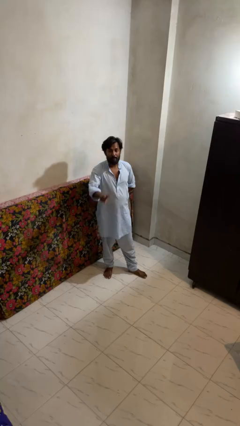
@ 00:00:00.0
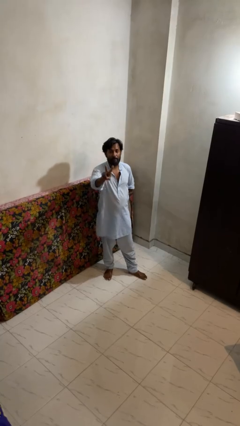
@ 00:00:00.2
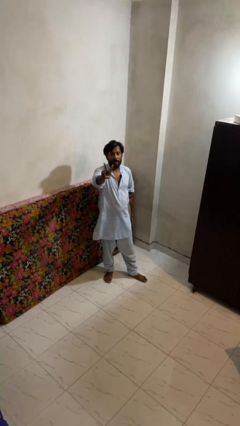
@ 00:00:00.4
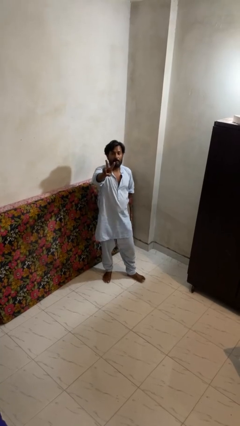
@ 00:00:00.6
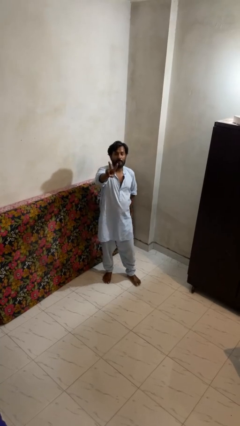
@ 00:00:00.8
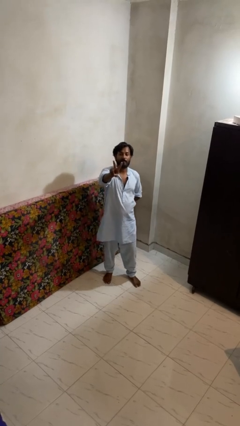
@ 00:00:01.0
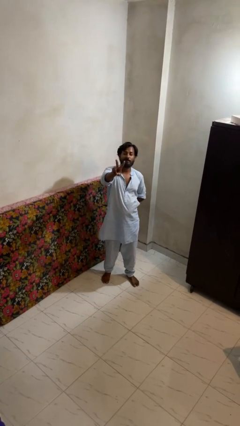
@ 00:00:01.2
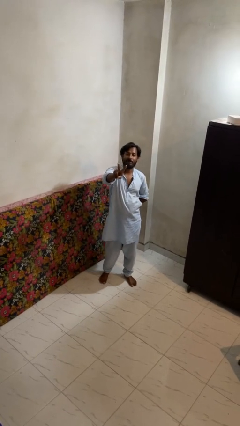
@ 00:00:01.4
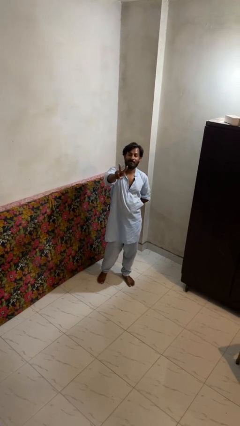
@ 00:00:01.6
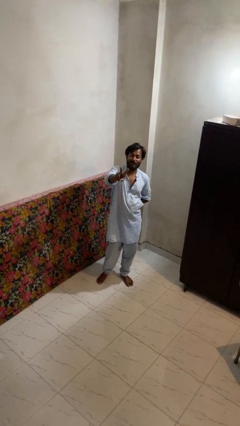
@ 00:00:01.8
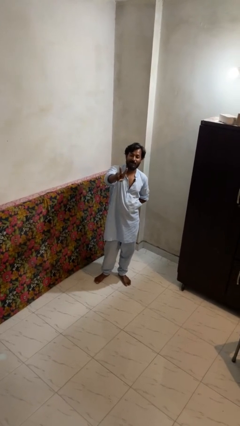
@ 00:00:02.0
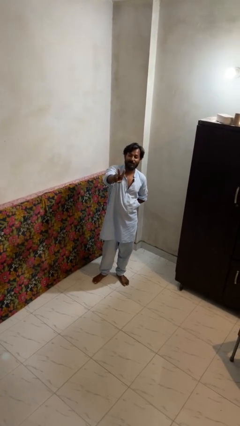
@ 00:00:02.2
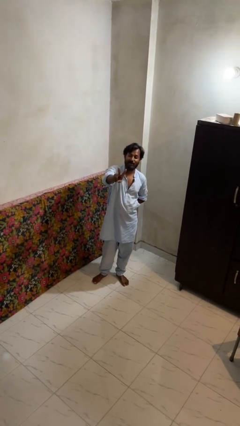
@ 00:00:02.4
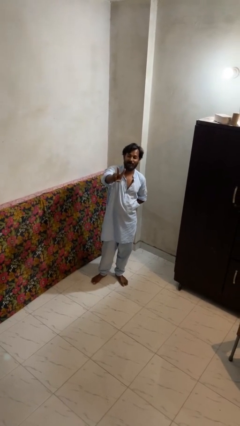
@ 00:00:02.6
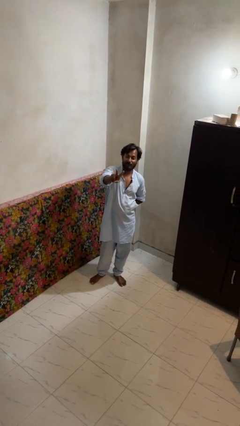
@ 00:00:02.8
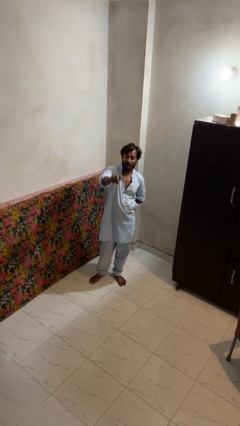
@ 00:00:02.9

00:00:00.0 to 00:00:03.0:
person gestures peace

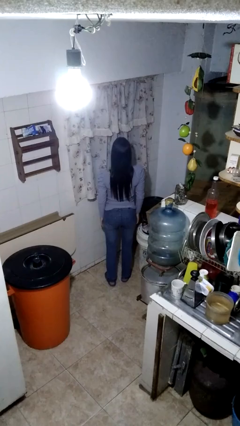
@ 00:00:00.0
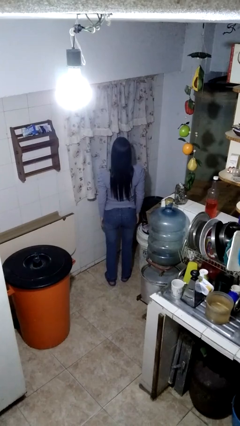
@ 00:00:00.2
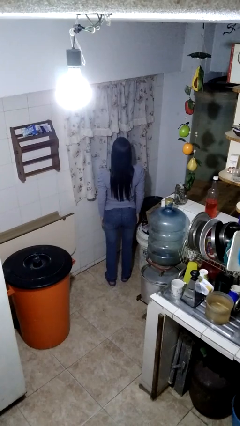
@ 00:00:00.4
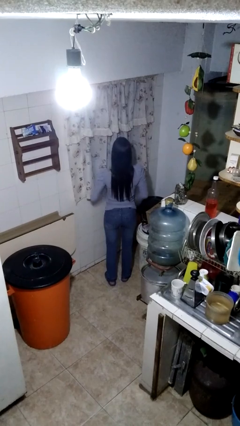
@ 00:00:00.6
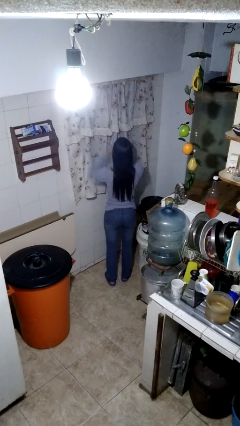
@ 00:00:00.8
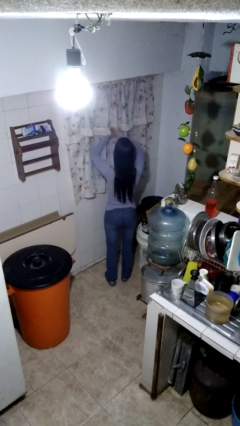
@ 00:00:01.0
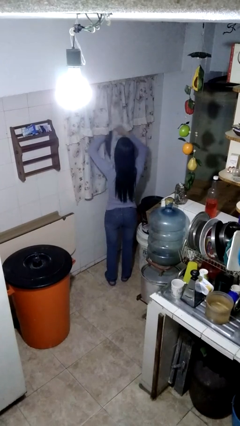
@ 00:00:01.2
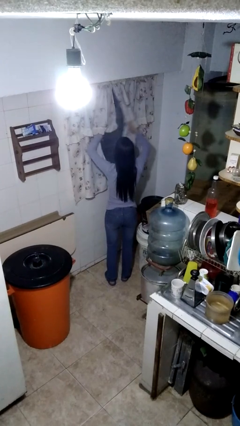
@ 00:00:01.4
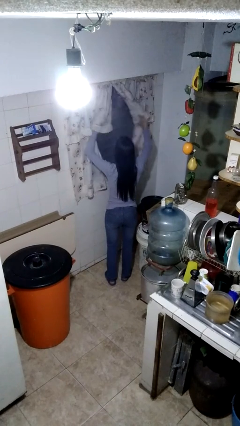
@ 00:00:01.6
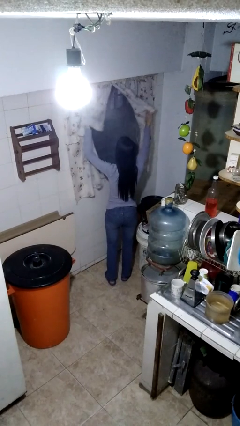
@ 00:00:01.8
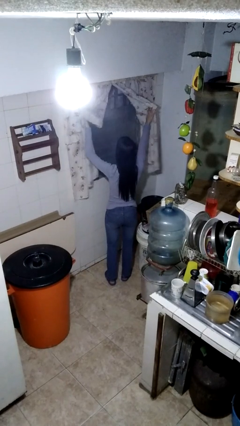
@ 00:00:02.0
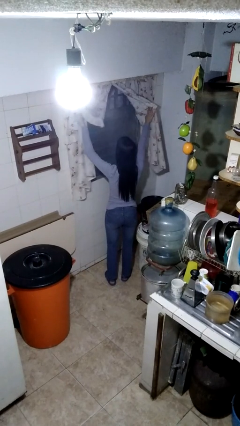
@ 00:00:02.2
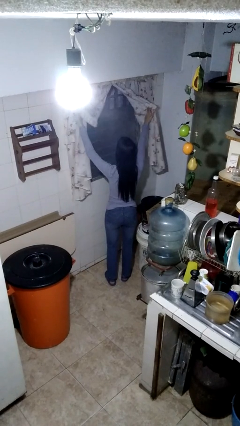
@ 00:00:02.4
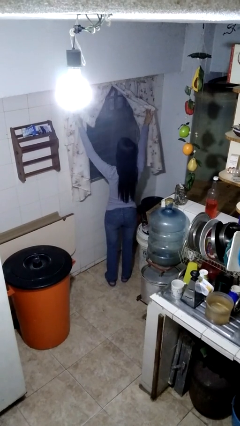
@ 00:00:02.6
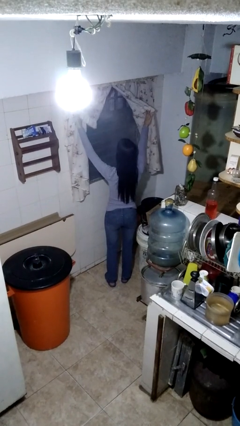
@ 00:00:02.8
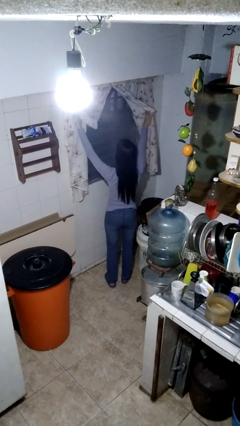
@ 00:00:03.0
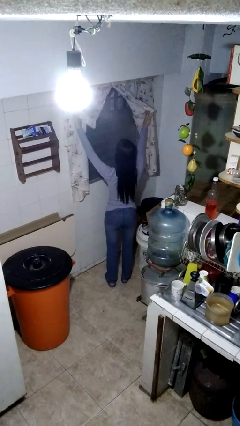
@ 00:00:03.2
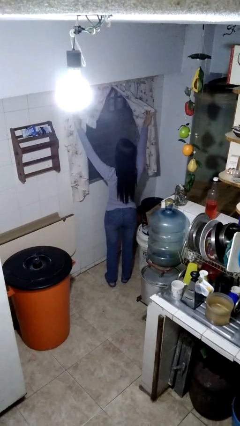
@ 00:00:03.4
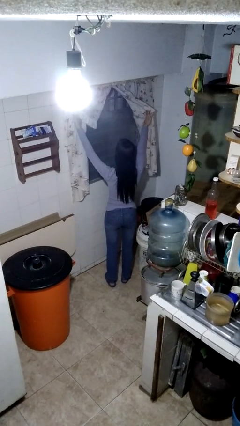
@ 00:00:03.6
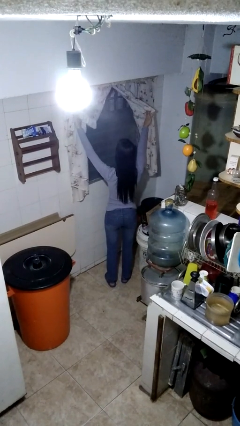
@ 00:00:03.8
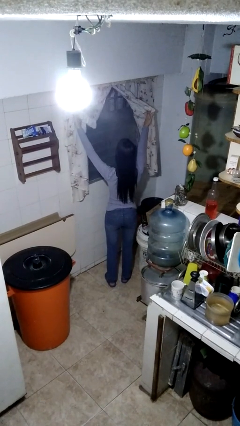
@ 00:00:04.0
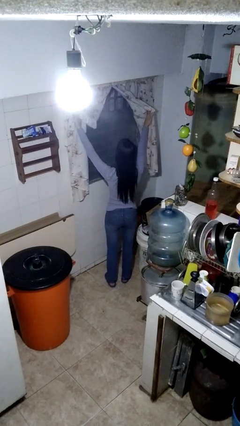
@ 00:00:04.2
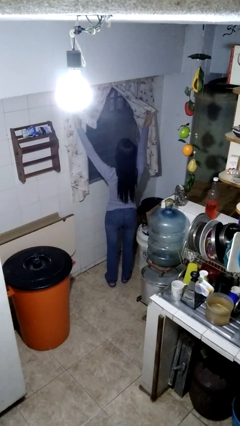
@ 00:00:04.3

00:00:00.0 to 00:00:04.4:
person opens curtains

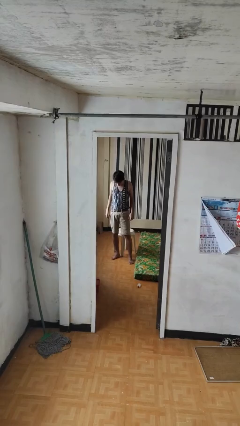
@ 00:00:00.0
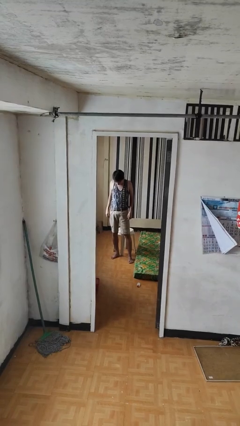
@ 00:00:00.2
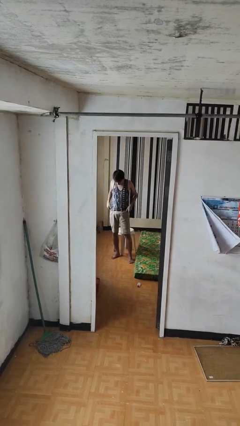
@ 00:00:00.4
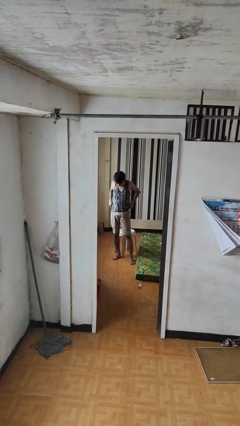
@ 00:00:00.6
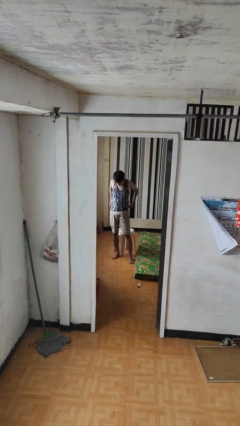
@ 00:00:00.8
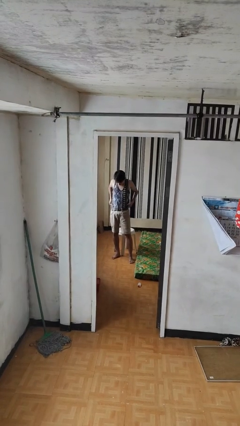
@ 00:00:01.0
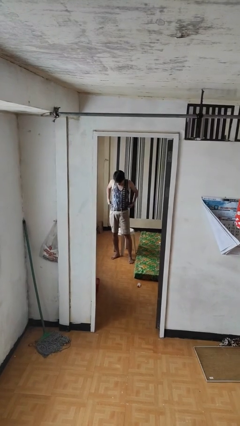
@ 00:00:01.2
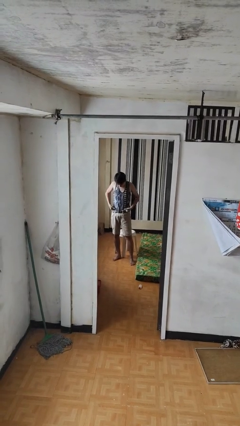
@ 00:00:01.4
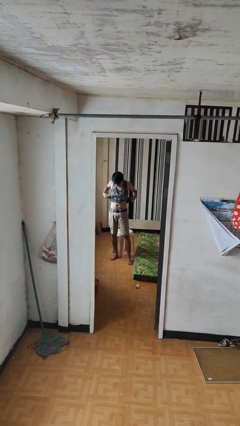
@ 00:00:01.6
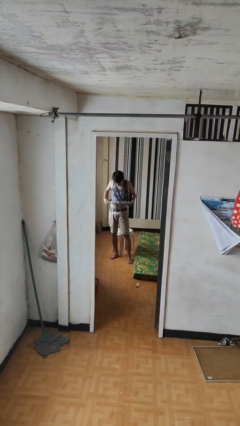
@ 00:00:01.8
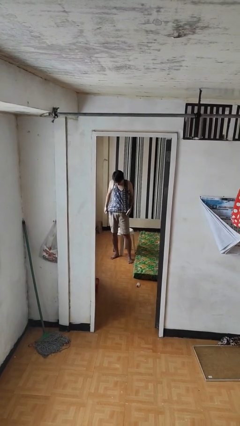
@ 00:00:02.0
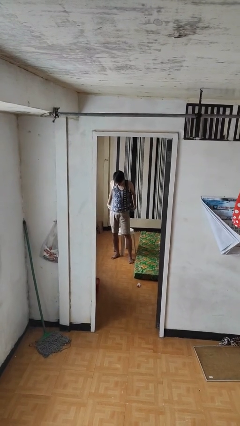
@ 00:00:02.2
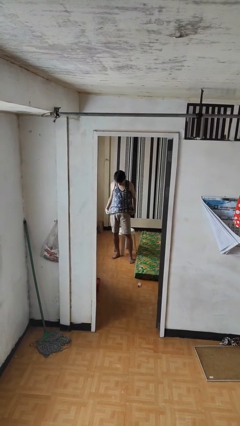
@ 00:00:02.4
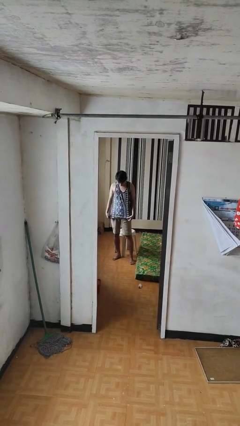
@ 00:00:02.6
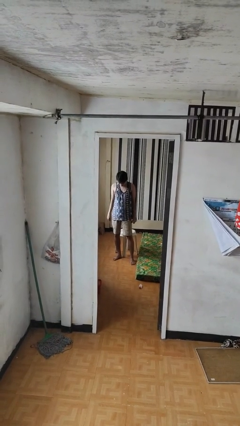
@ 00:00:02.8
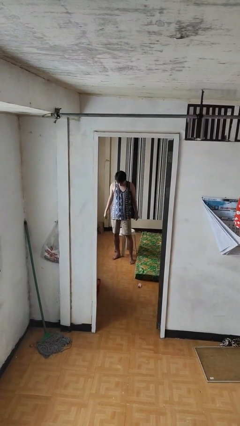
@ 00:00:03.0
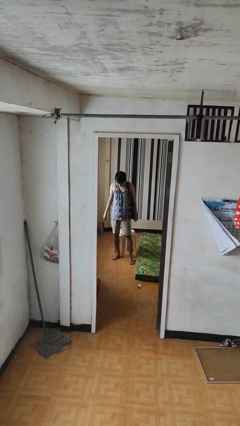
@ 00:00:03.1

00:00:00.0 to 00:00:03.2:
person untucks shirt

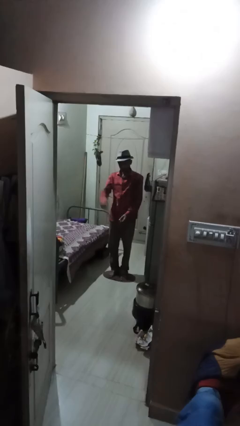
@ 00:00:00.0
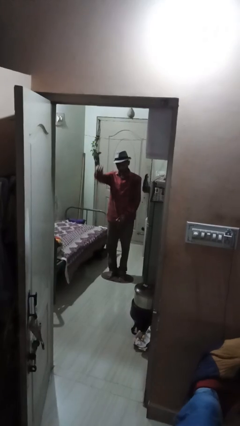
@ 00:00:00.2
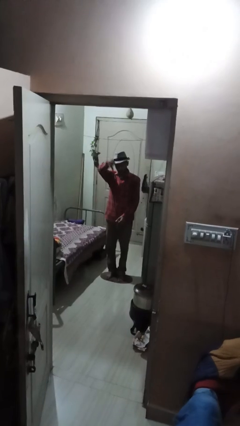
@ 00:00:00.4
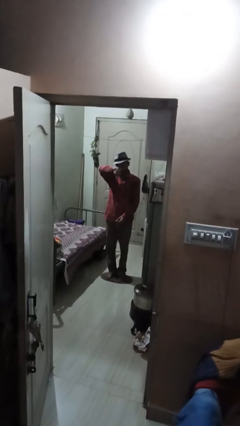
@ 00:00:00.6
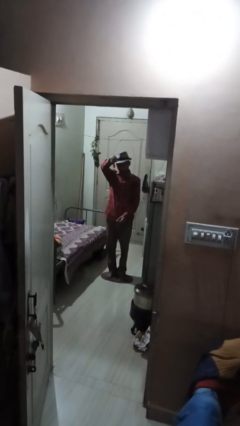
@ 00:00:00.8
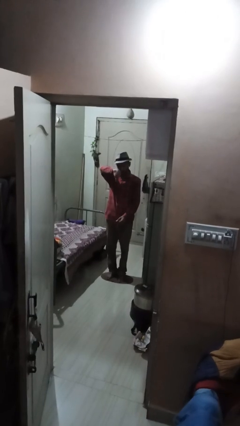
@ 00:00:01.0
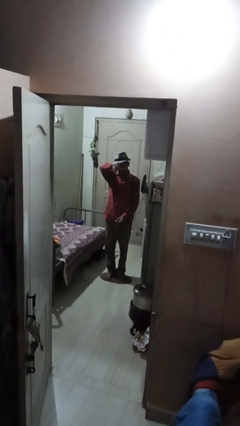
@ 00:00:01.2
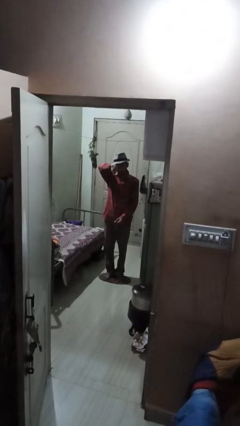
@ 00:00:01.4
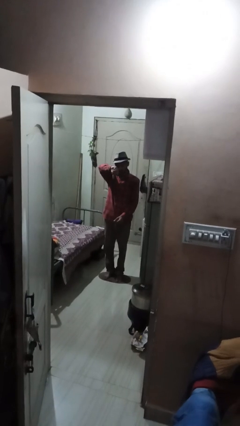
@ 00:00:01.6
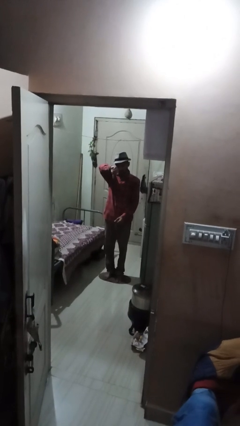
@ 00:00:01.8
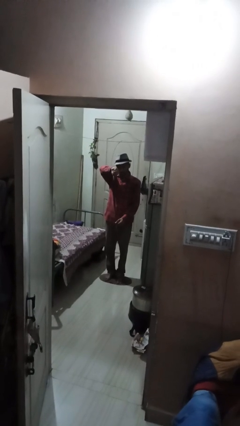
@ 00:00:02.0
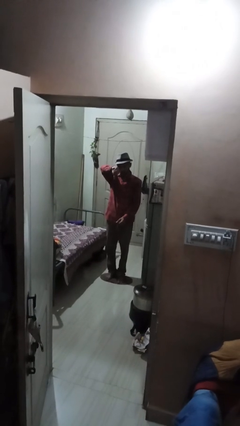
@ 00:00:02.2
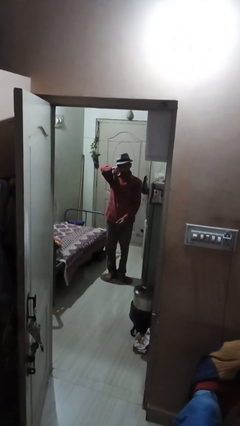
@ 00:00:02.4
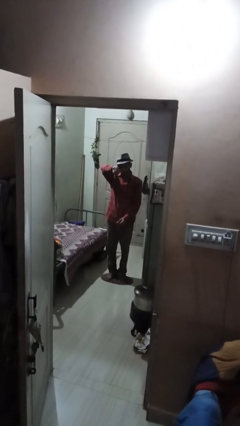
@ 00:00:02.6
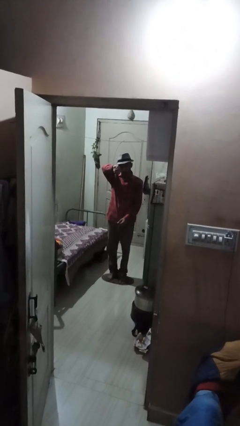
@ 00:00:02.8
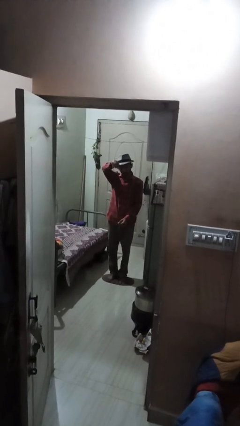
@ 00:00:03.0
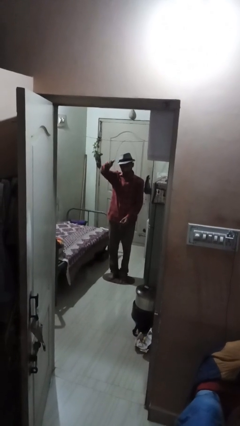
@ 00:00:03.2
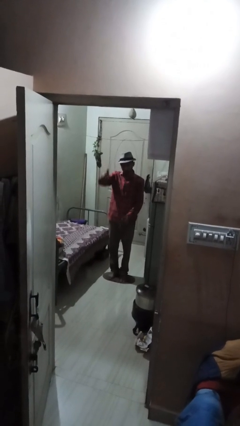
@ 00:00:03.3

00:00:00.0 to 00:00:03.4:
person gestures thumbs down

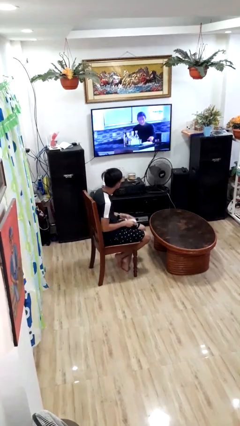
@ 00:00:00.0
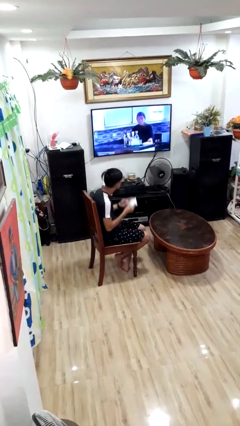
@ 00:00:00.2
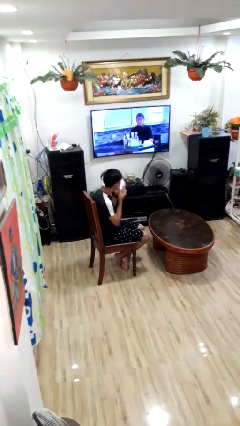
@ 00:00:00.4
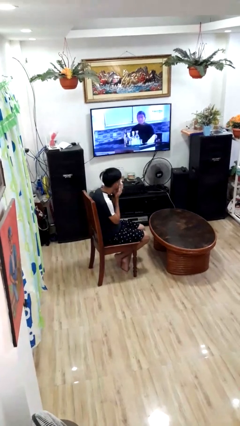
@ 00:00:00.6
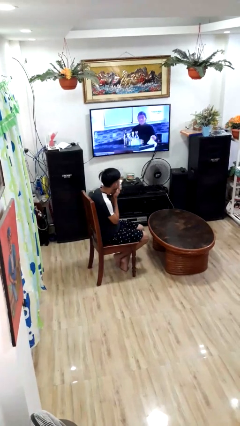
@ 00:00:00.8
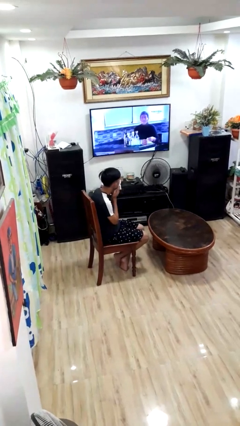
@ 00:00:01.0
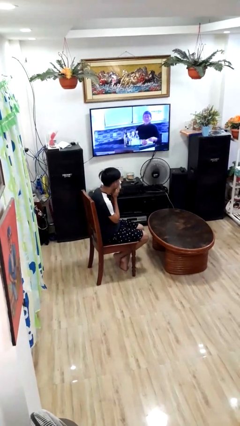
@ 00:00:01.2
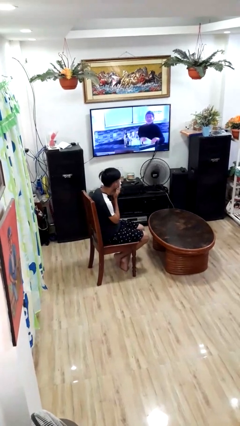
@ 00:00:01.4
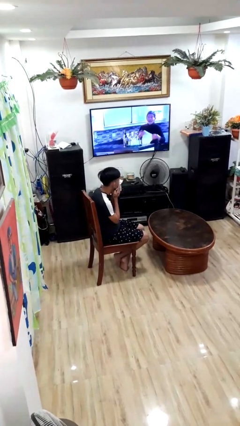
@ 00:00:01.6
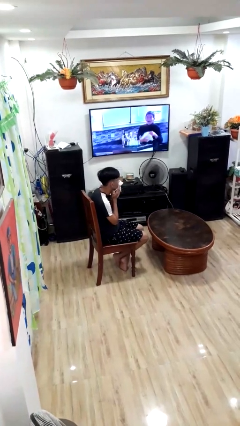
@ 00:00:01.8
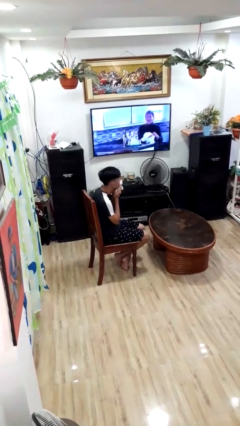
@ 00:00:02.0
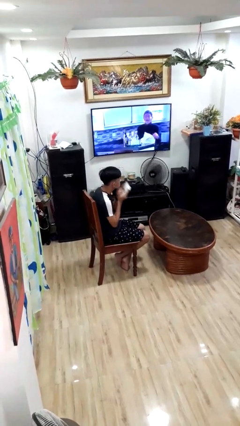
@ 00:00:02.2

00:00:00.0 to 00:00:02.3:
person wipes mouth with napkin

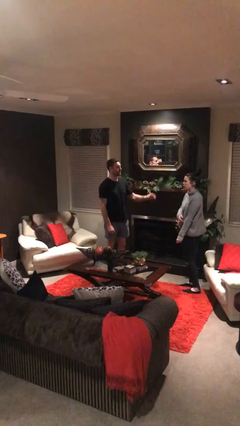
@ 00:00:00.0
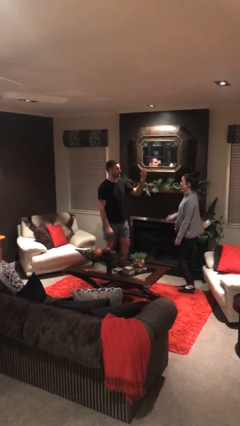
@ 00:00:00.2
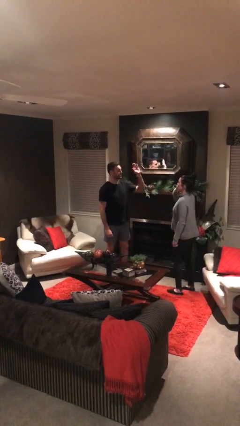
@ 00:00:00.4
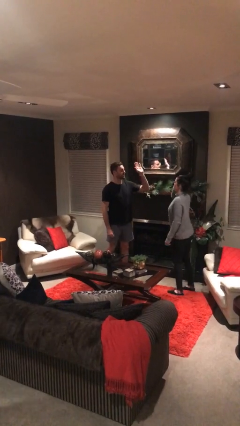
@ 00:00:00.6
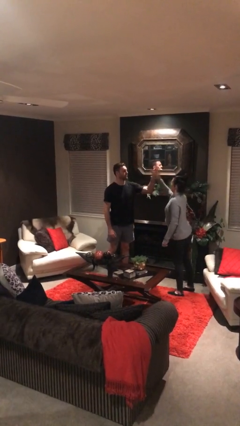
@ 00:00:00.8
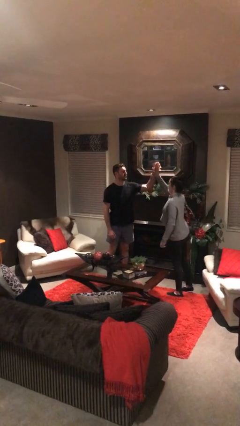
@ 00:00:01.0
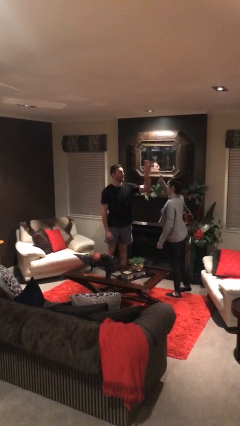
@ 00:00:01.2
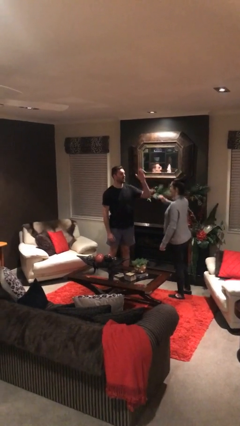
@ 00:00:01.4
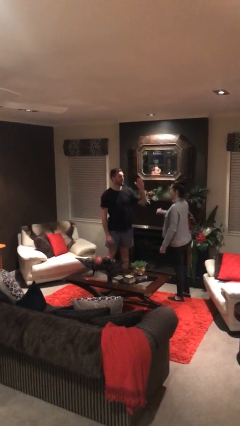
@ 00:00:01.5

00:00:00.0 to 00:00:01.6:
person highfives hand
